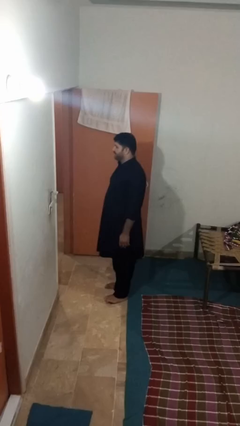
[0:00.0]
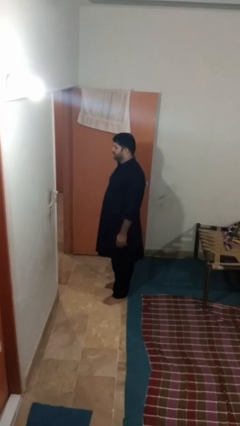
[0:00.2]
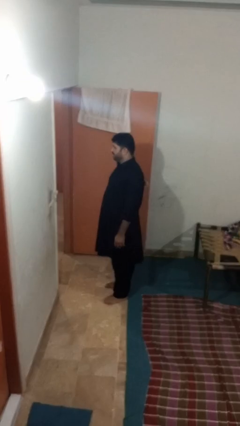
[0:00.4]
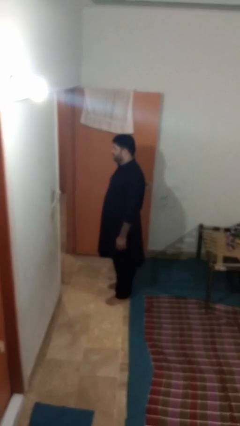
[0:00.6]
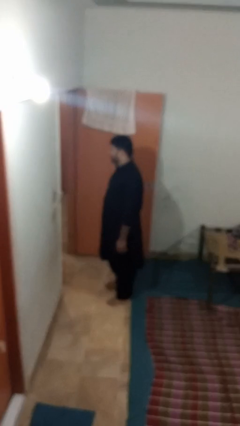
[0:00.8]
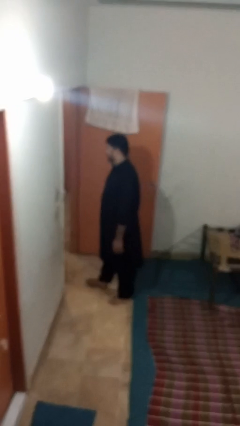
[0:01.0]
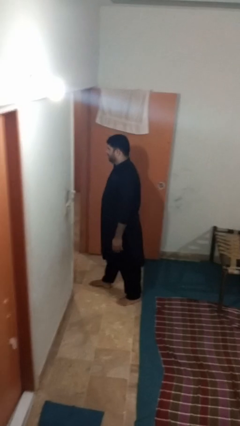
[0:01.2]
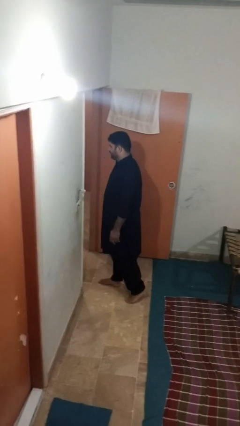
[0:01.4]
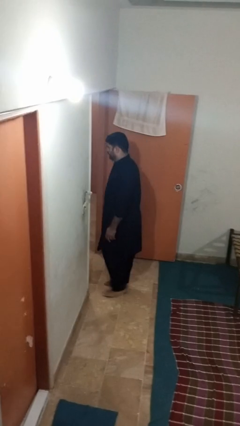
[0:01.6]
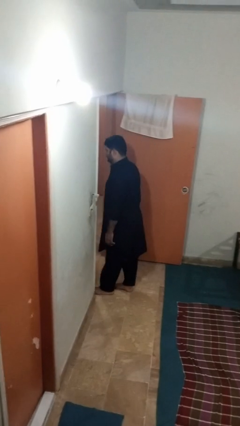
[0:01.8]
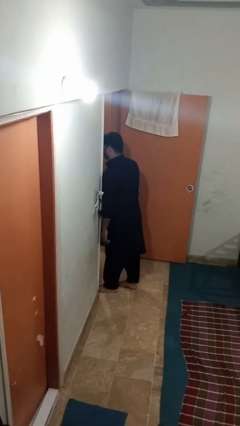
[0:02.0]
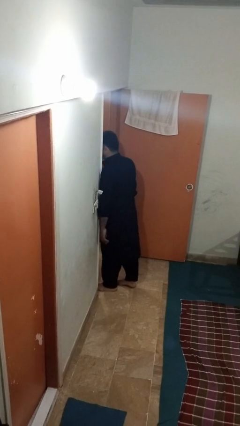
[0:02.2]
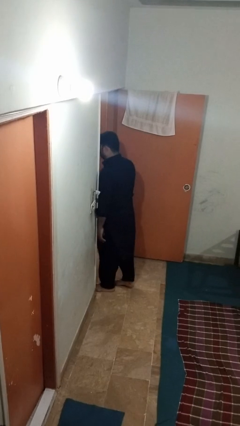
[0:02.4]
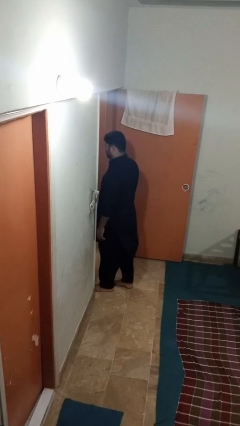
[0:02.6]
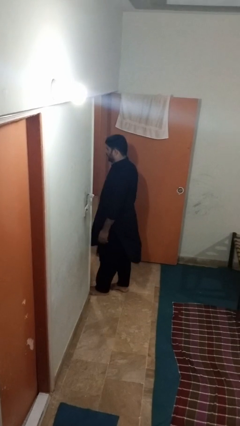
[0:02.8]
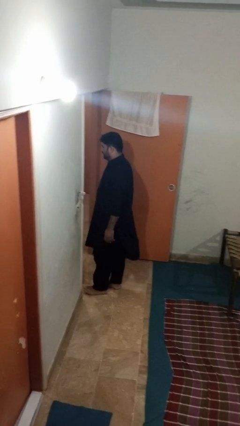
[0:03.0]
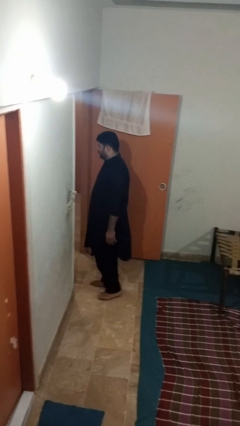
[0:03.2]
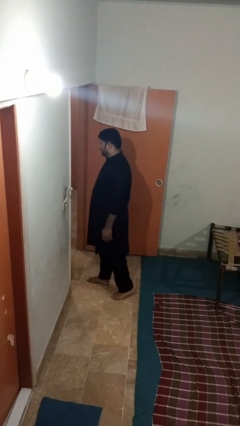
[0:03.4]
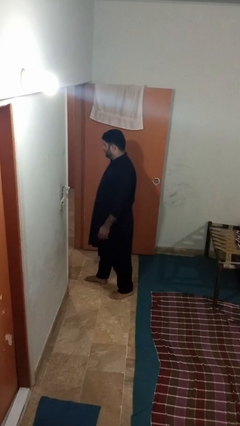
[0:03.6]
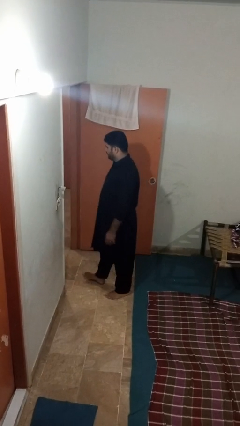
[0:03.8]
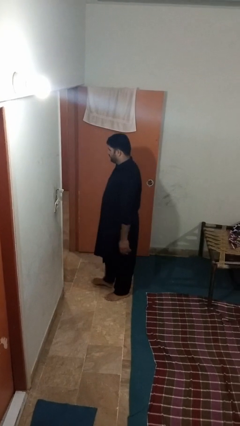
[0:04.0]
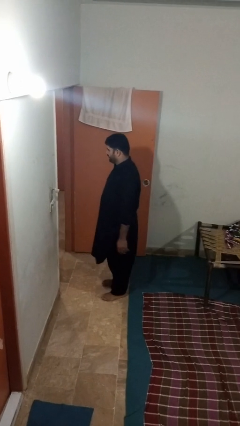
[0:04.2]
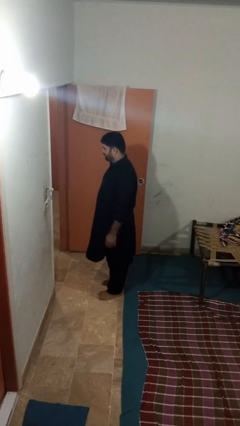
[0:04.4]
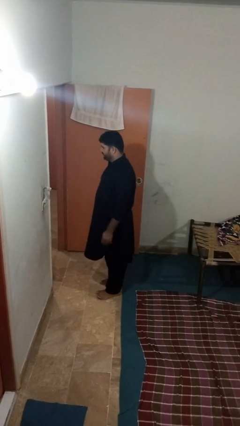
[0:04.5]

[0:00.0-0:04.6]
person bumps into wall

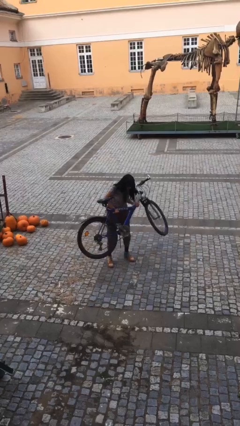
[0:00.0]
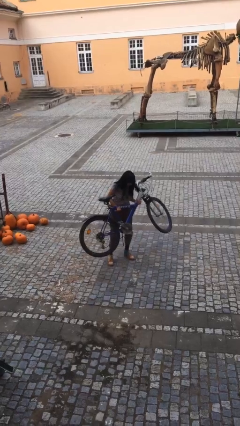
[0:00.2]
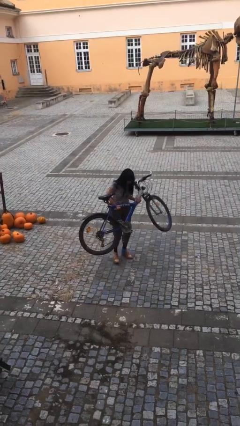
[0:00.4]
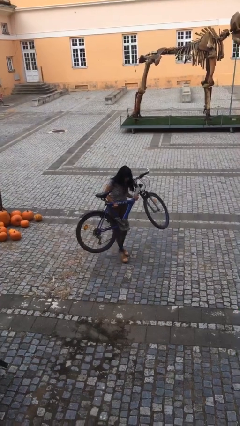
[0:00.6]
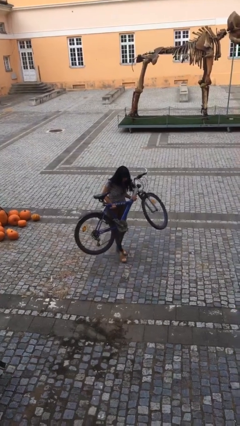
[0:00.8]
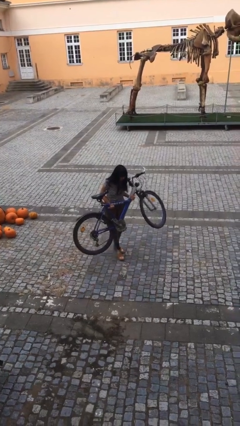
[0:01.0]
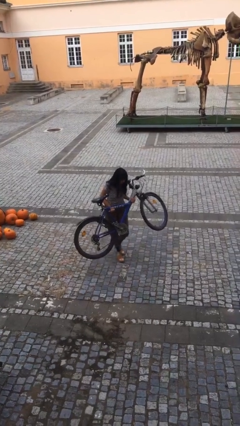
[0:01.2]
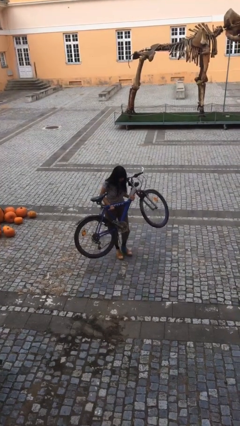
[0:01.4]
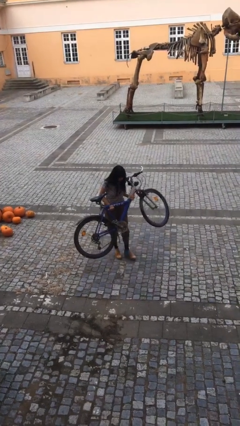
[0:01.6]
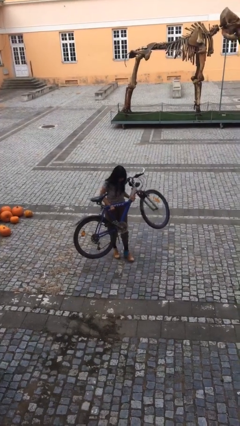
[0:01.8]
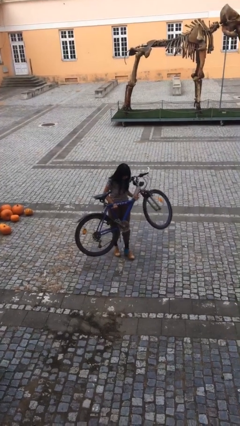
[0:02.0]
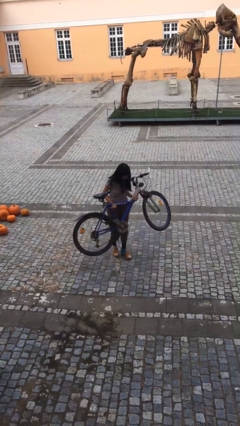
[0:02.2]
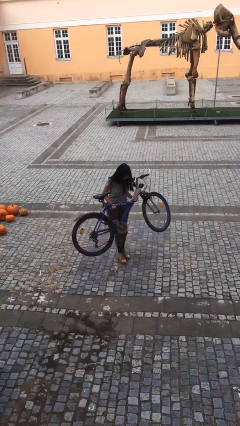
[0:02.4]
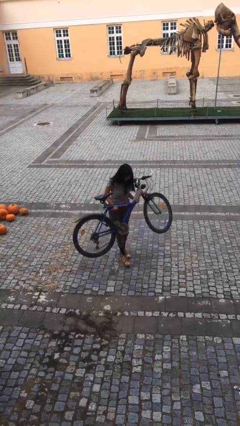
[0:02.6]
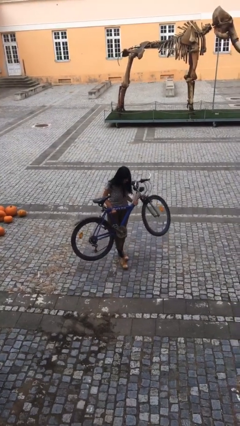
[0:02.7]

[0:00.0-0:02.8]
person carries heavy object

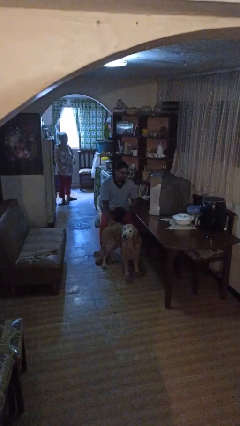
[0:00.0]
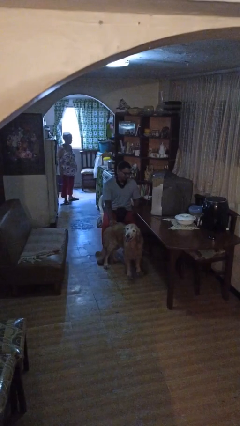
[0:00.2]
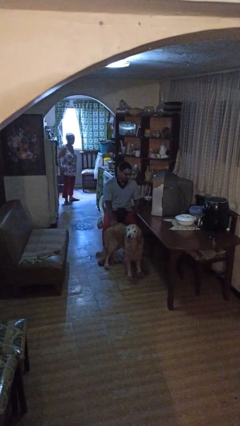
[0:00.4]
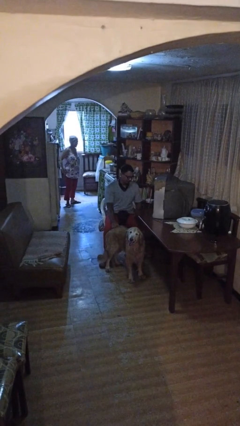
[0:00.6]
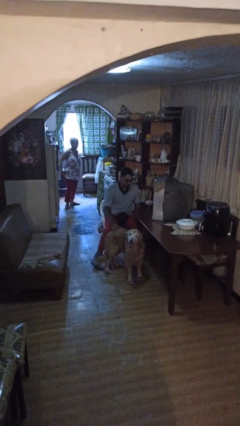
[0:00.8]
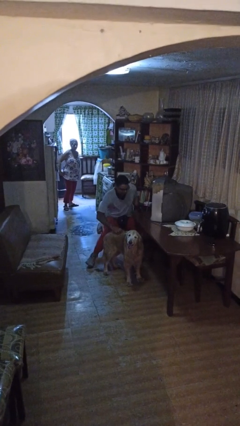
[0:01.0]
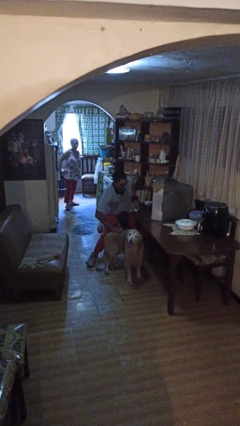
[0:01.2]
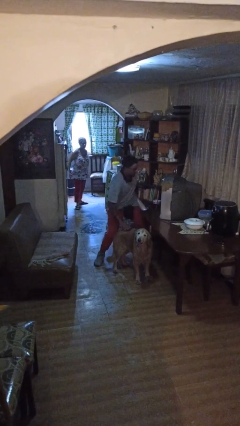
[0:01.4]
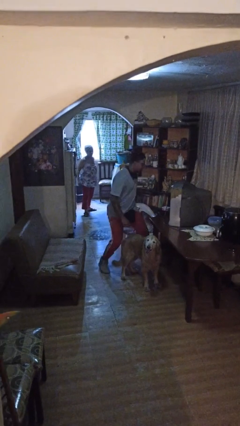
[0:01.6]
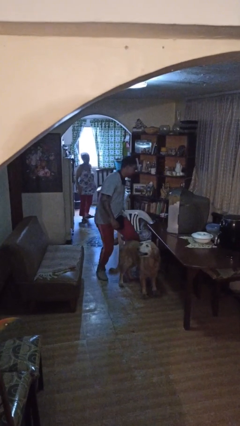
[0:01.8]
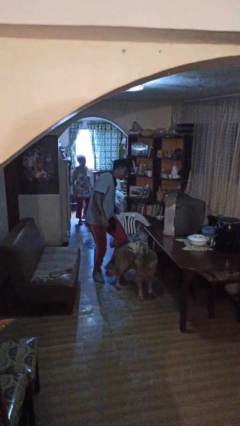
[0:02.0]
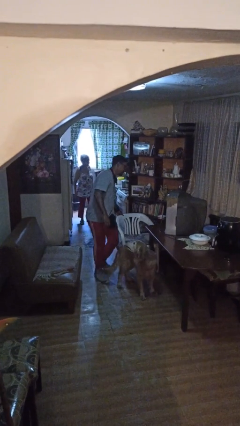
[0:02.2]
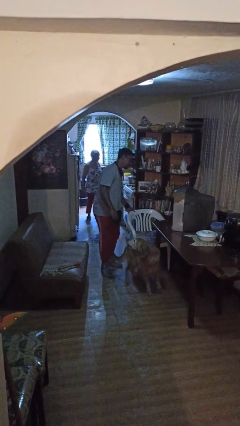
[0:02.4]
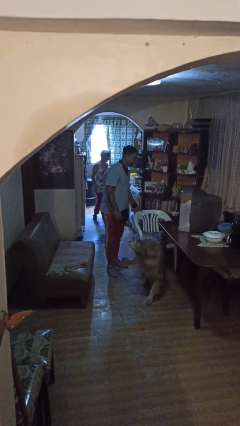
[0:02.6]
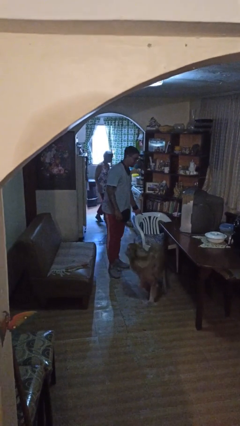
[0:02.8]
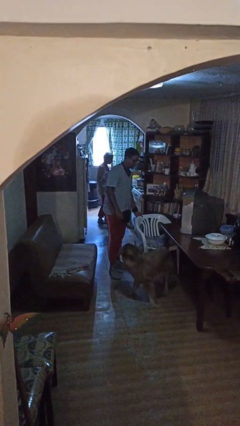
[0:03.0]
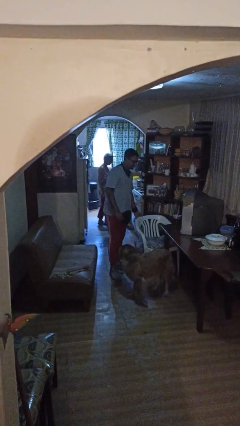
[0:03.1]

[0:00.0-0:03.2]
person stands up

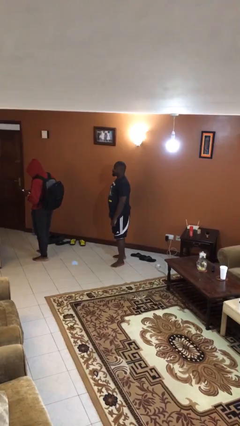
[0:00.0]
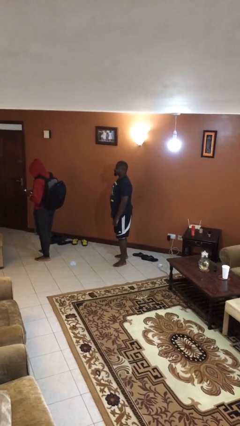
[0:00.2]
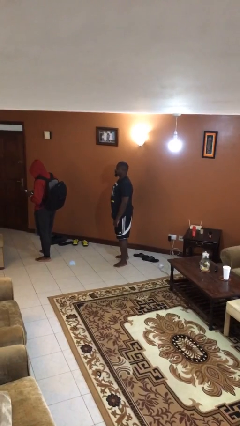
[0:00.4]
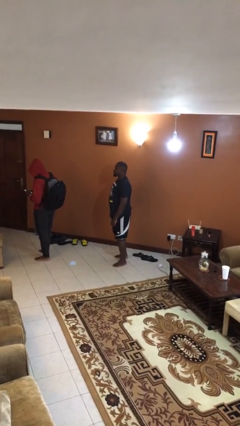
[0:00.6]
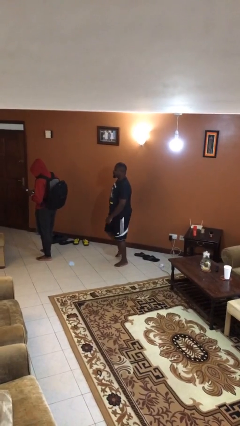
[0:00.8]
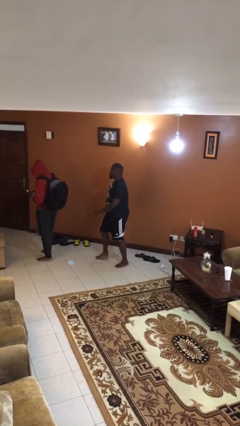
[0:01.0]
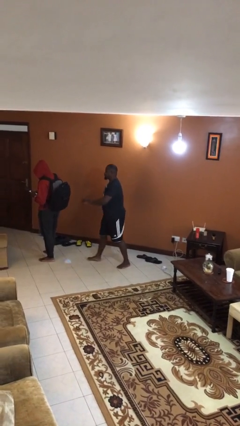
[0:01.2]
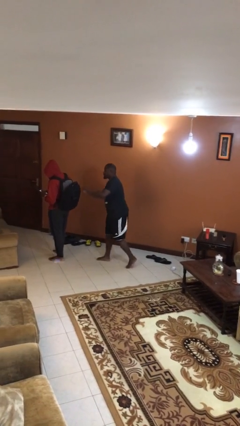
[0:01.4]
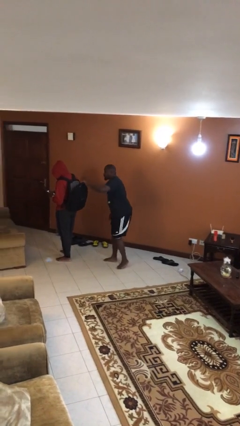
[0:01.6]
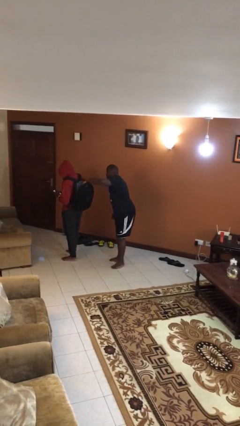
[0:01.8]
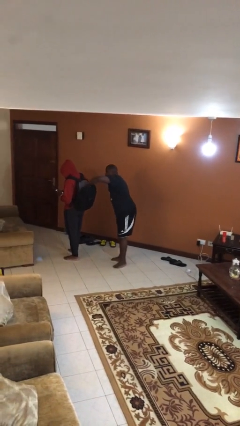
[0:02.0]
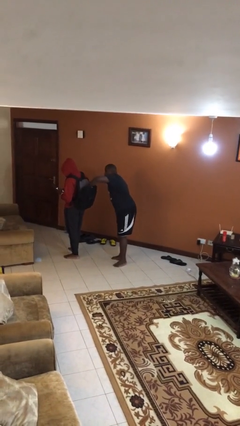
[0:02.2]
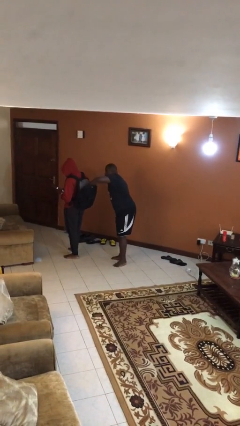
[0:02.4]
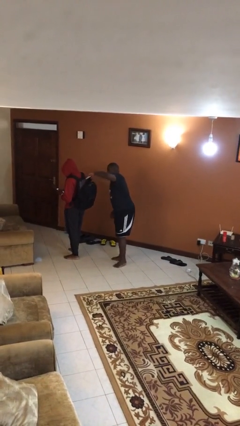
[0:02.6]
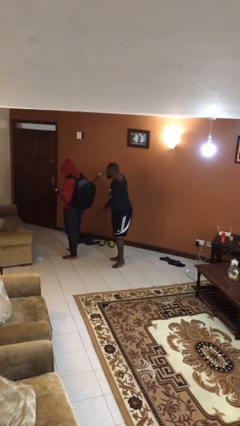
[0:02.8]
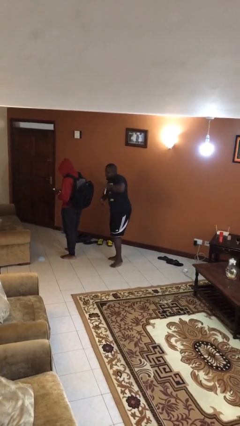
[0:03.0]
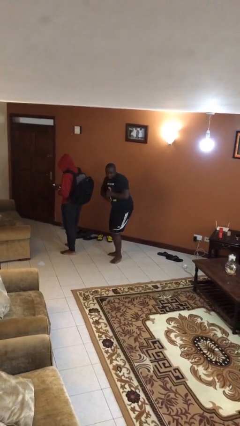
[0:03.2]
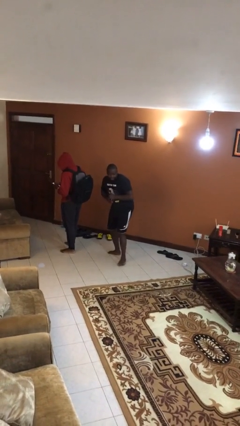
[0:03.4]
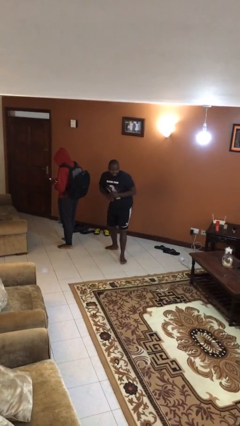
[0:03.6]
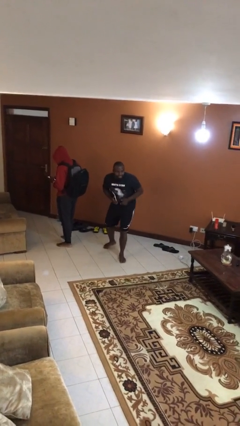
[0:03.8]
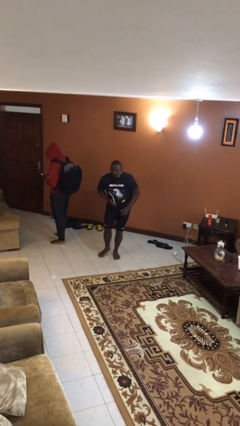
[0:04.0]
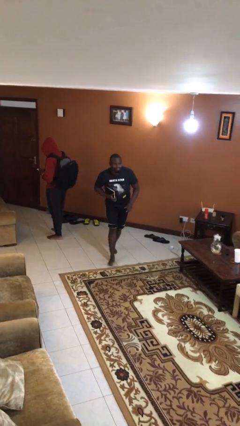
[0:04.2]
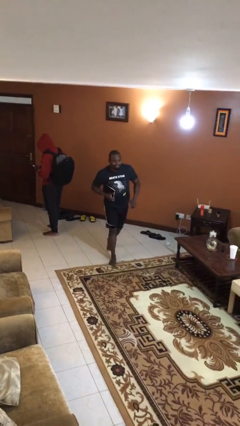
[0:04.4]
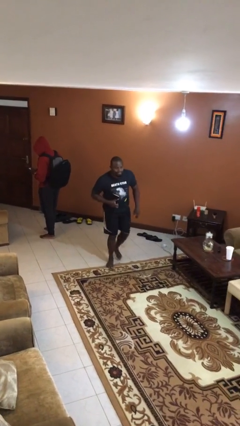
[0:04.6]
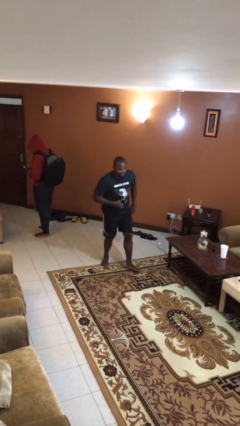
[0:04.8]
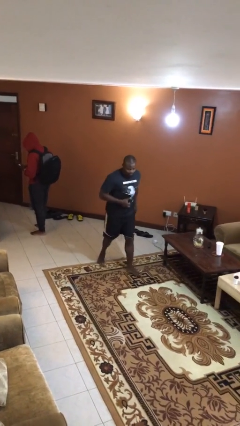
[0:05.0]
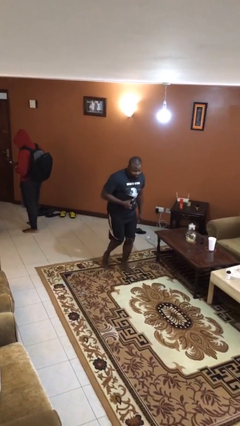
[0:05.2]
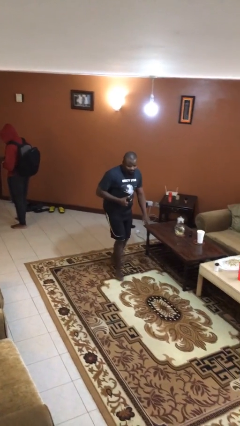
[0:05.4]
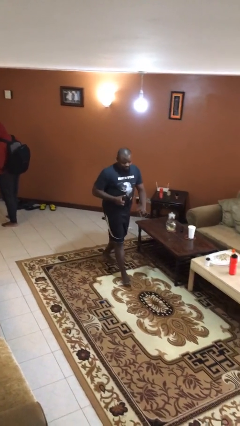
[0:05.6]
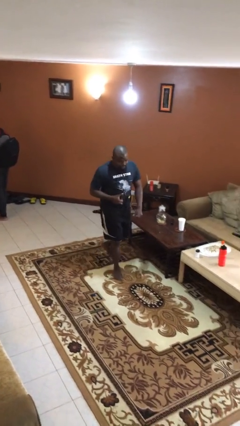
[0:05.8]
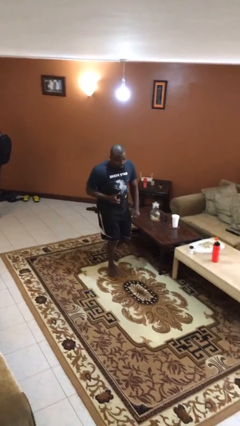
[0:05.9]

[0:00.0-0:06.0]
person steals object from person

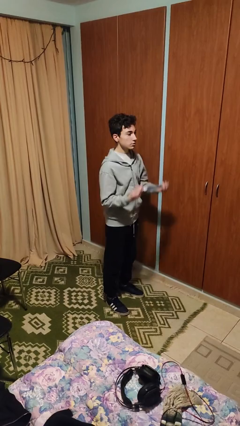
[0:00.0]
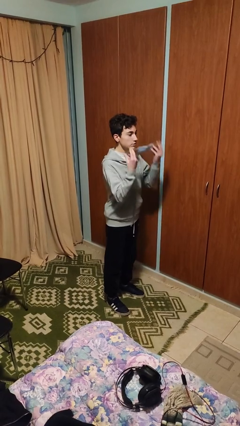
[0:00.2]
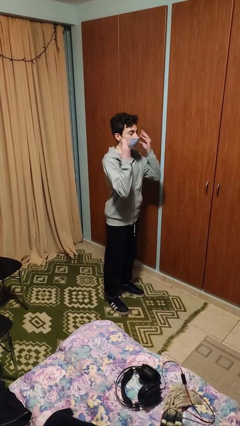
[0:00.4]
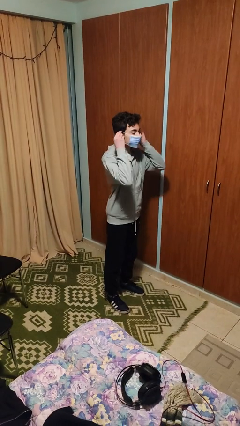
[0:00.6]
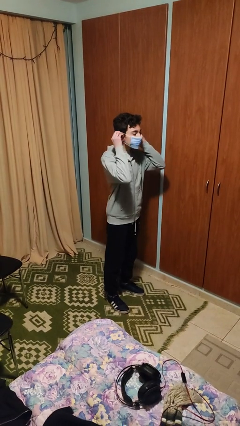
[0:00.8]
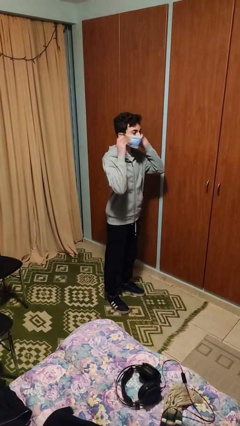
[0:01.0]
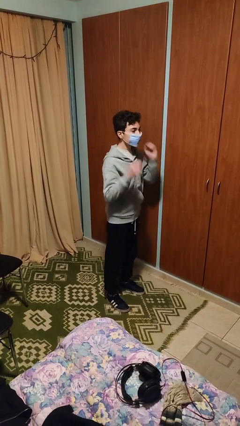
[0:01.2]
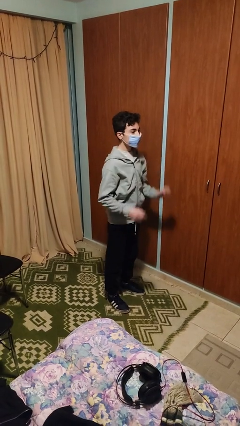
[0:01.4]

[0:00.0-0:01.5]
person puts on facemask
